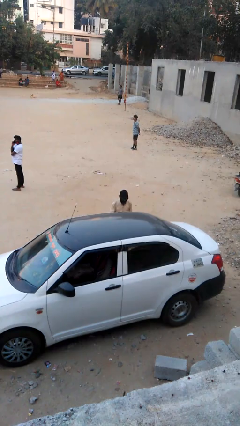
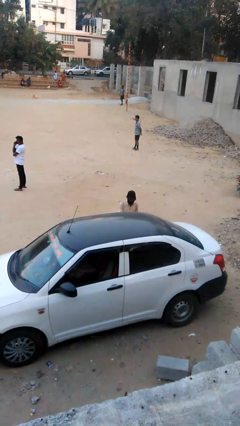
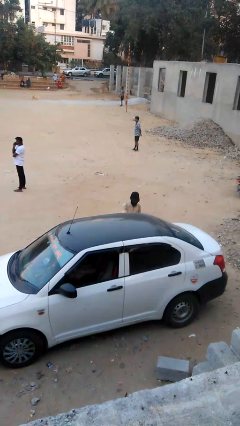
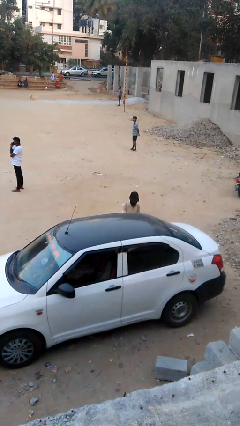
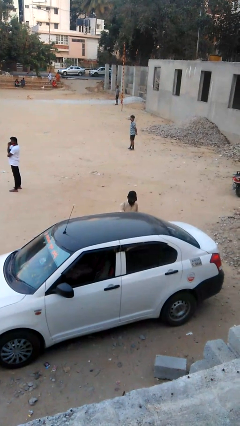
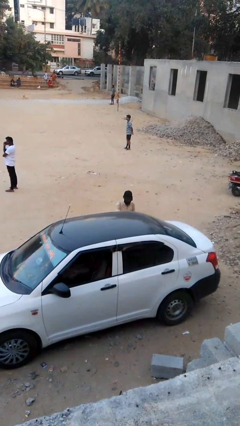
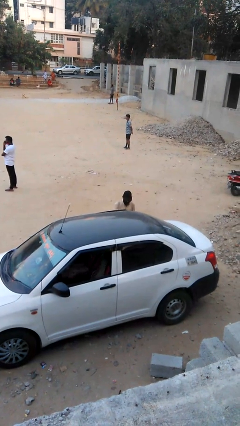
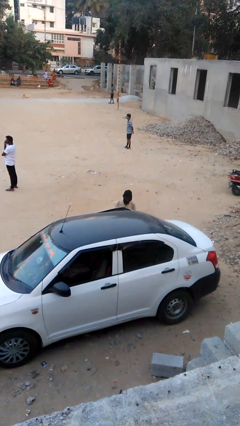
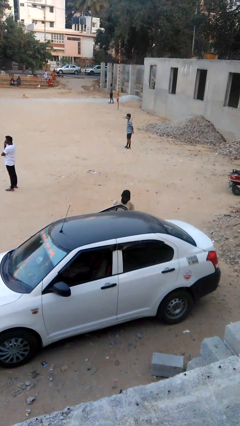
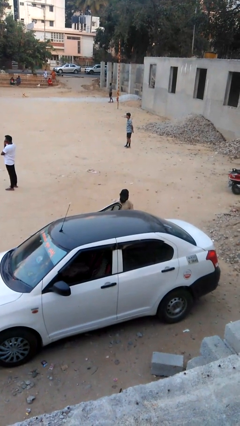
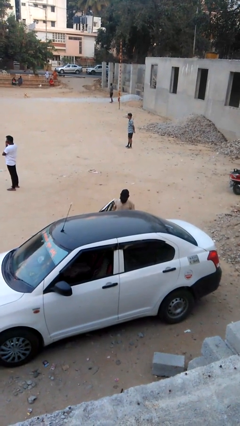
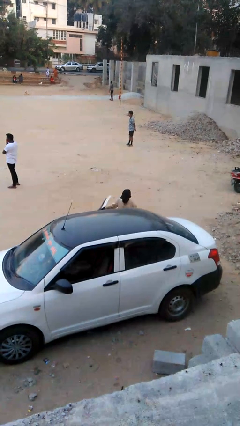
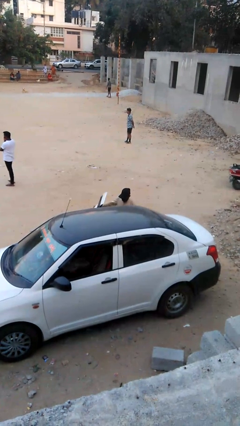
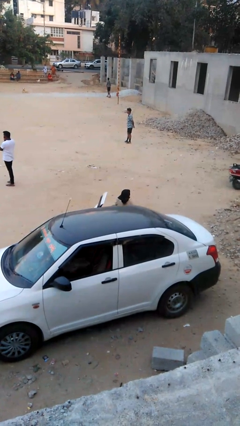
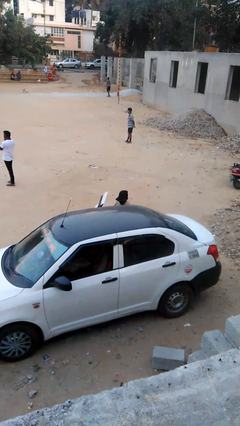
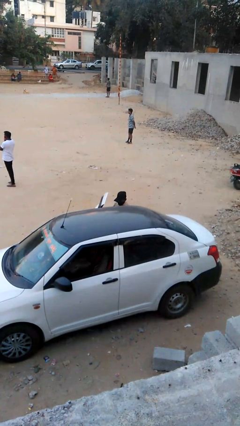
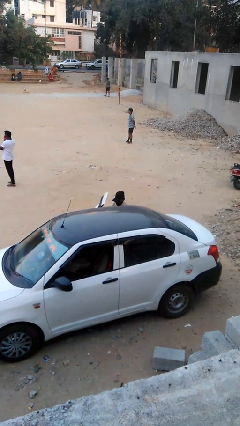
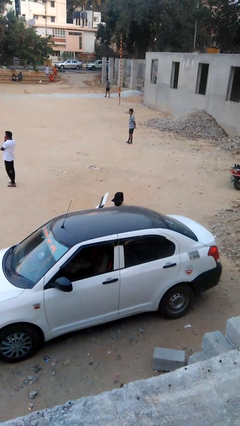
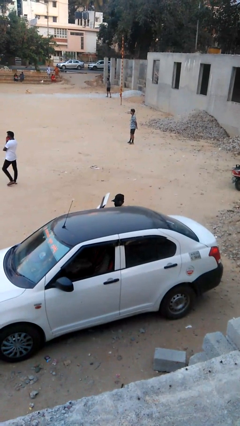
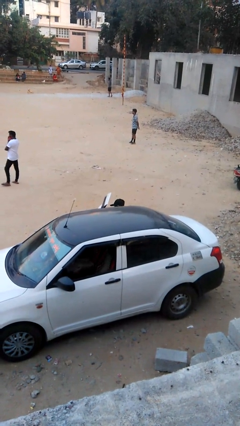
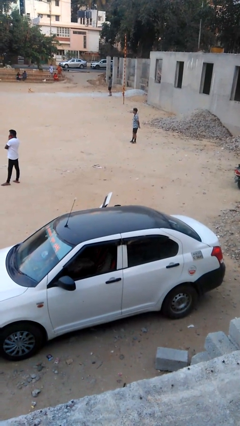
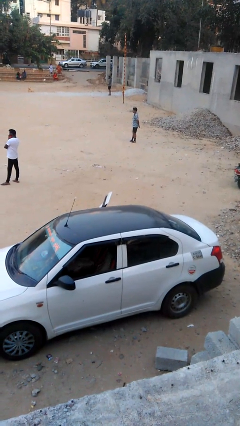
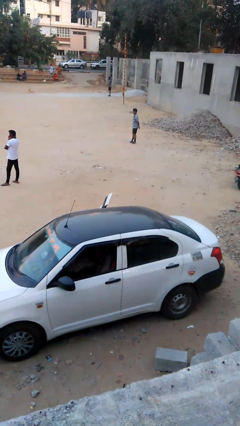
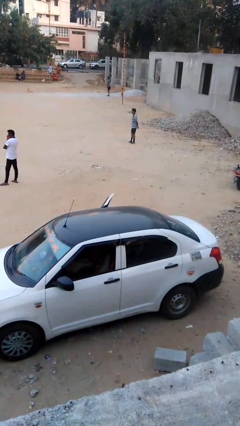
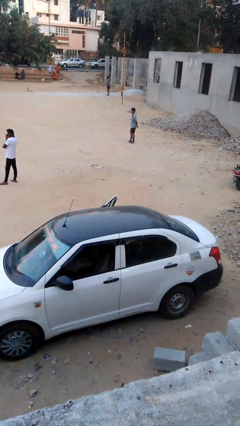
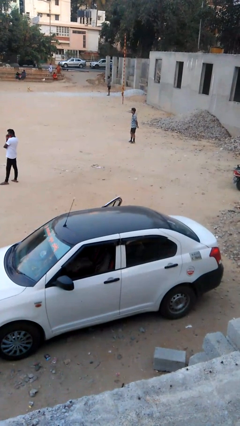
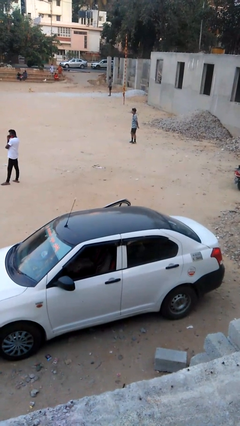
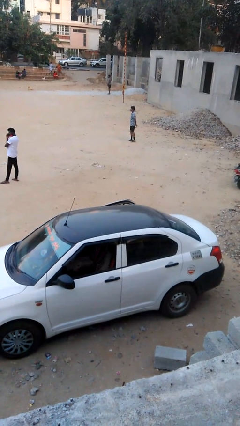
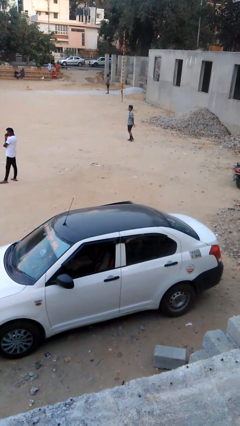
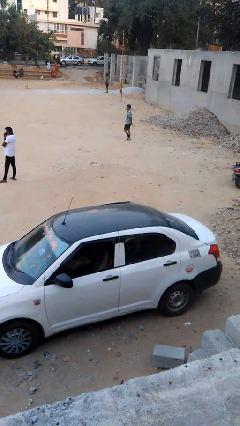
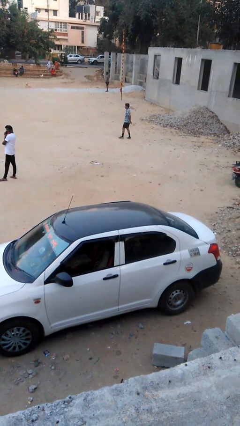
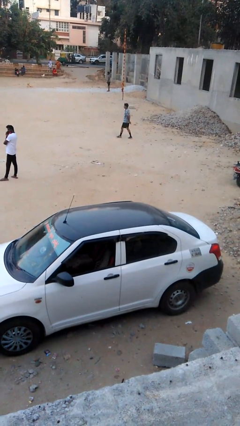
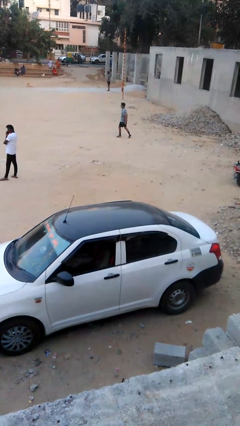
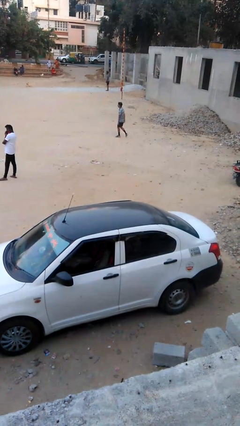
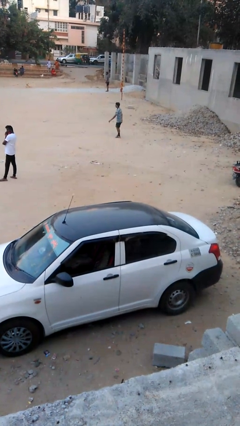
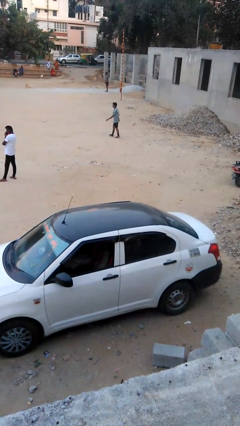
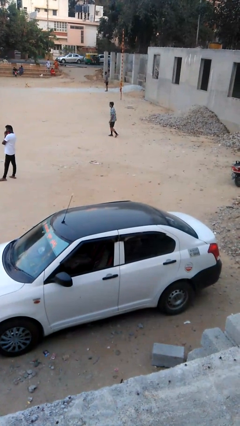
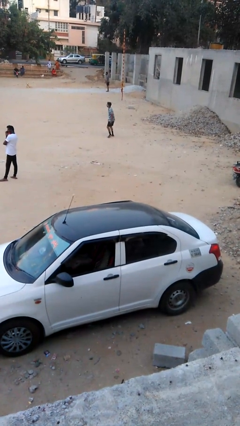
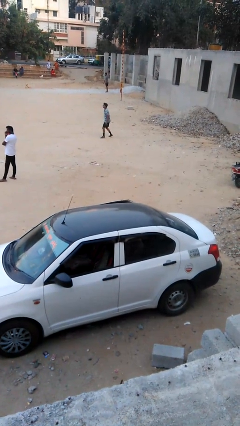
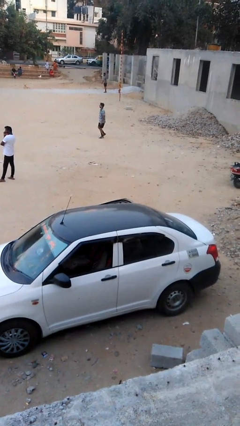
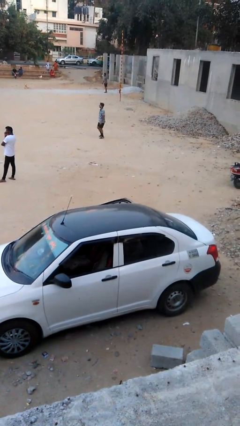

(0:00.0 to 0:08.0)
person enters car

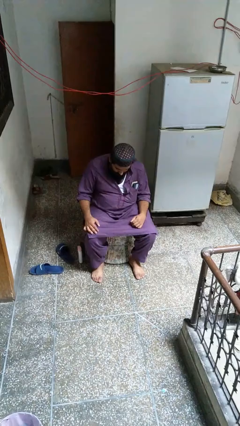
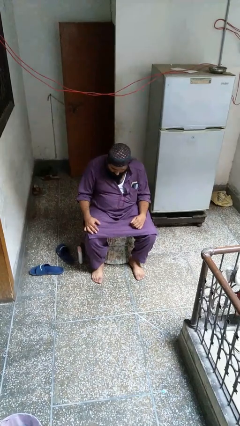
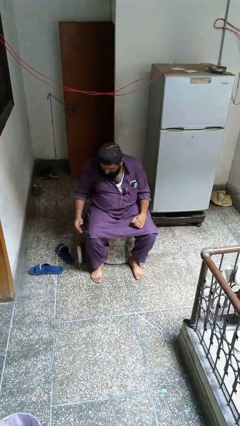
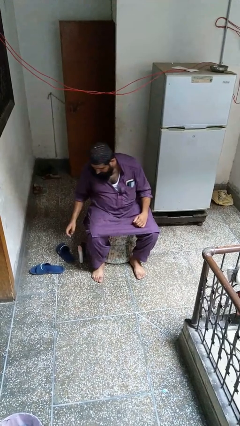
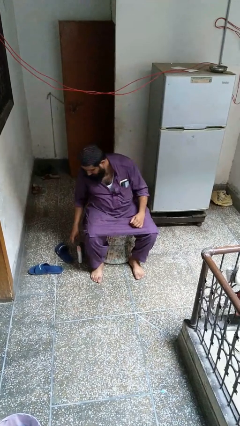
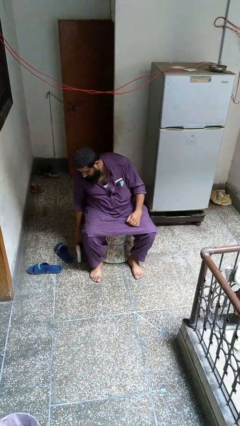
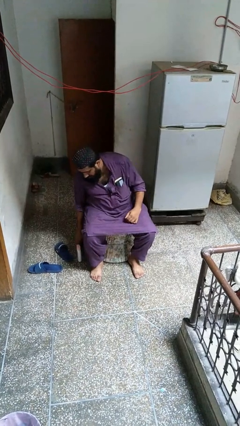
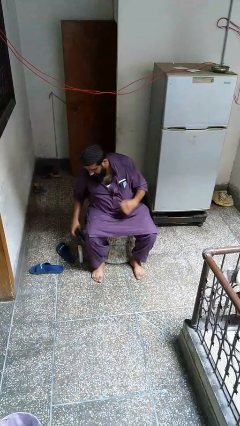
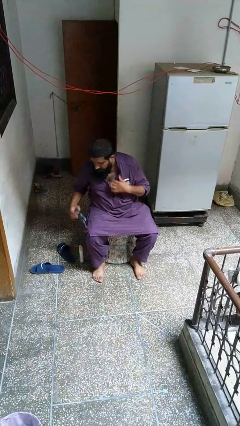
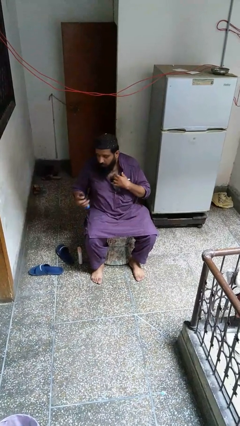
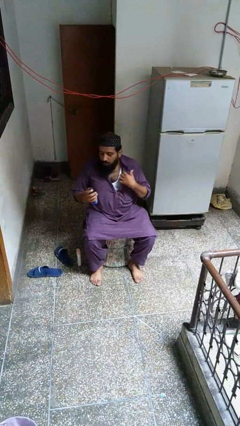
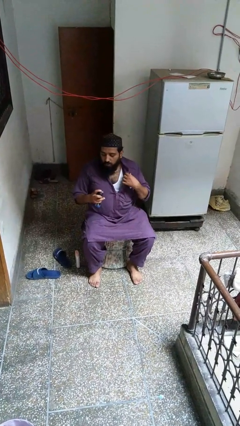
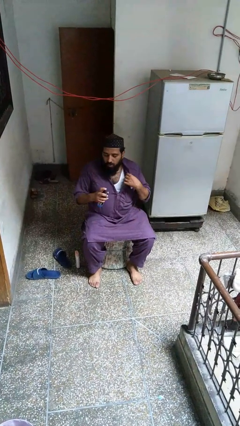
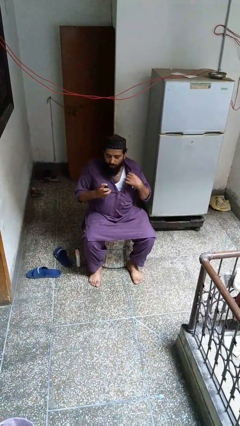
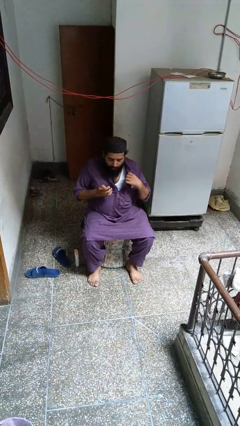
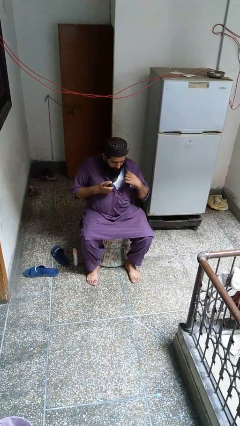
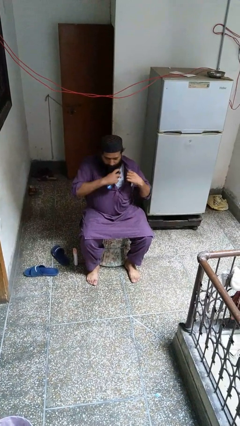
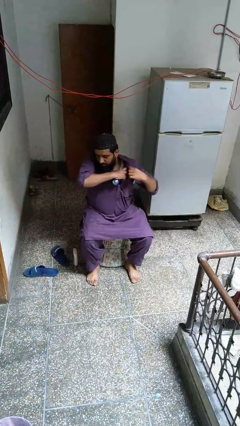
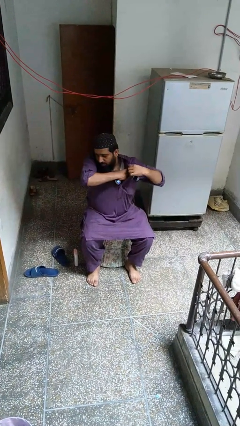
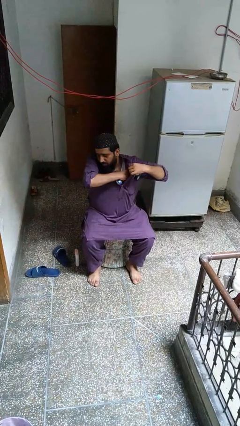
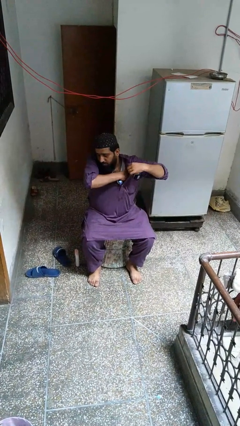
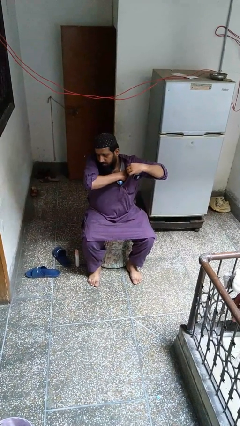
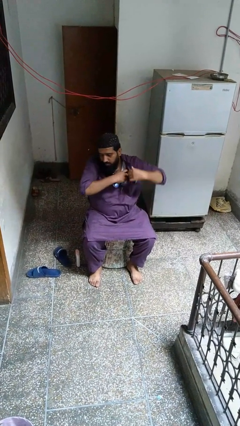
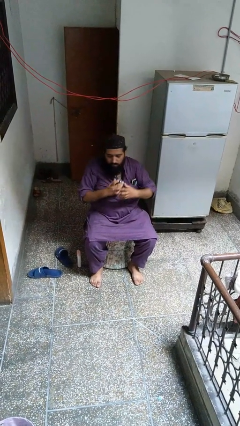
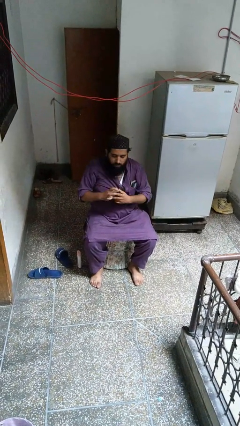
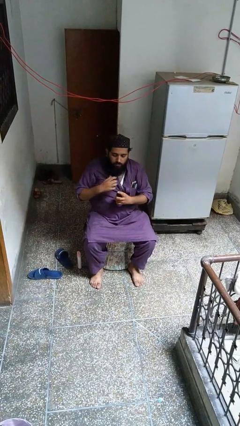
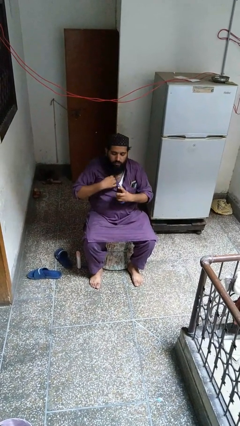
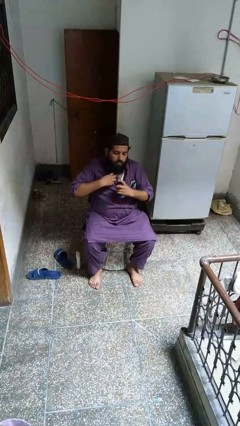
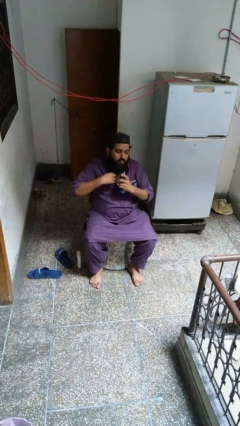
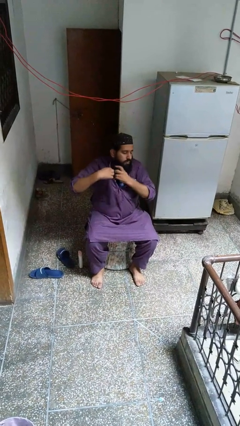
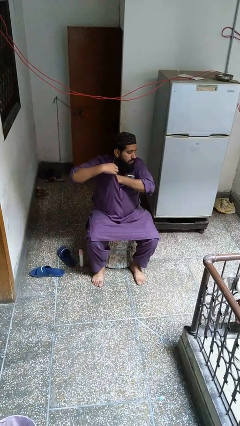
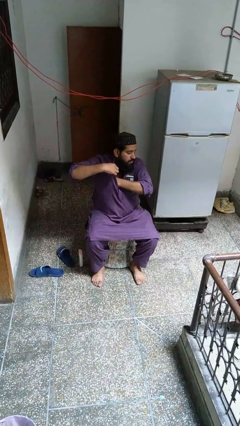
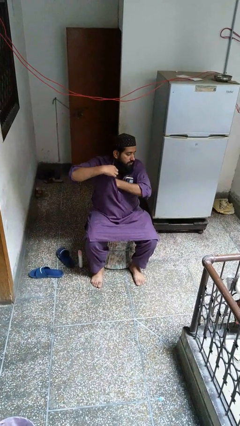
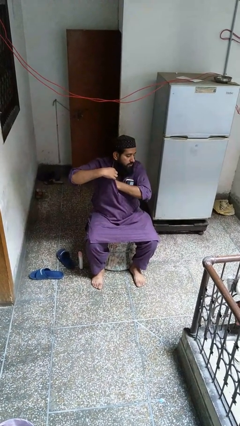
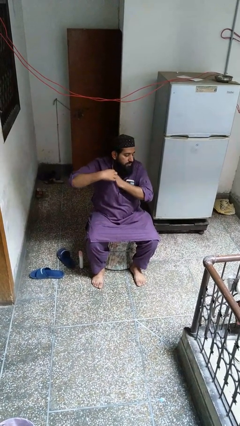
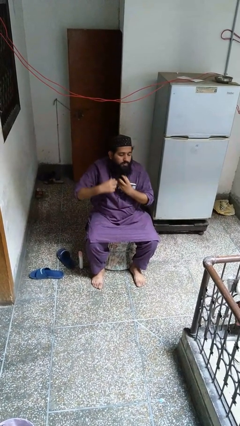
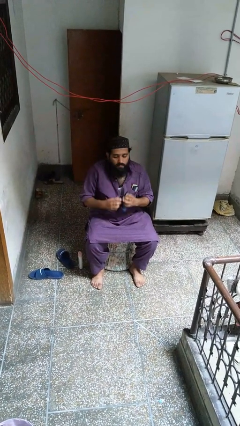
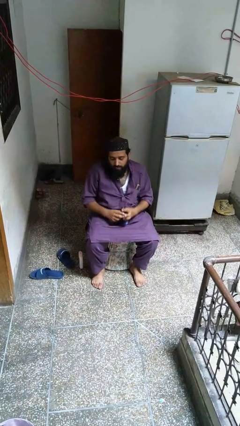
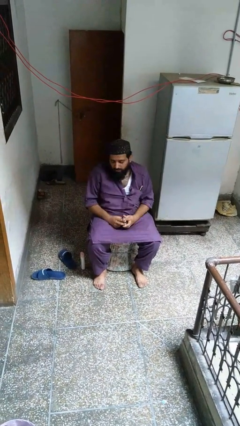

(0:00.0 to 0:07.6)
person applies deodorant

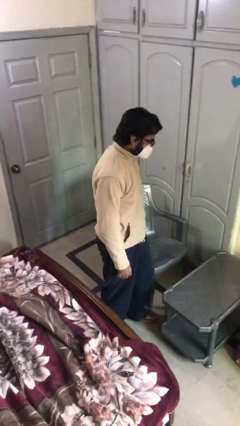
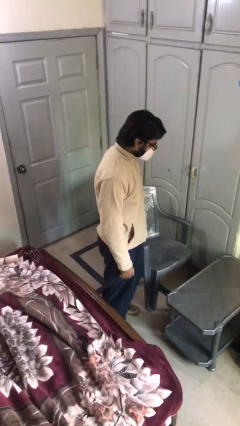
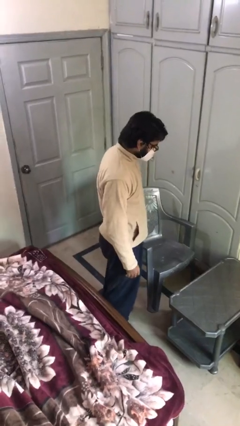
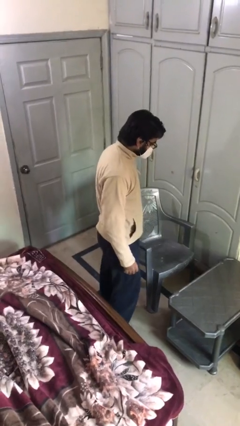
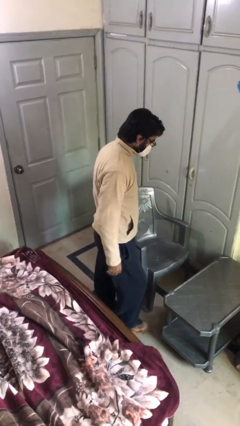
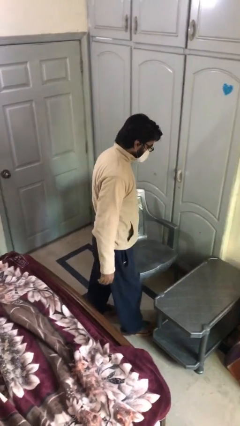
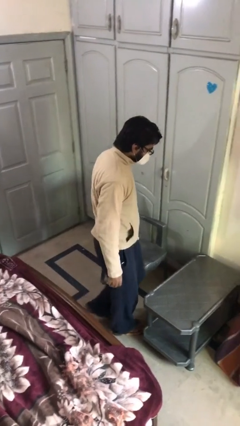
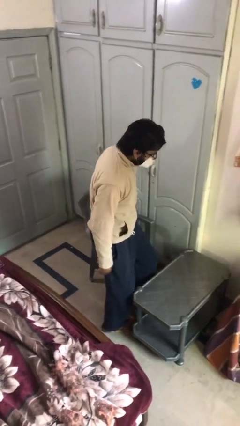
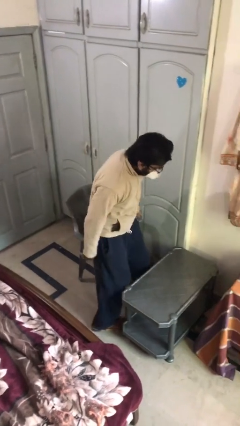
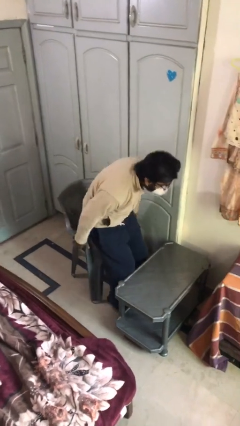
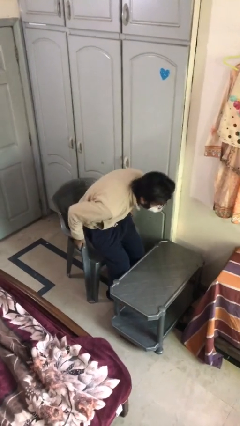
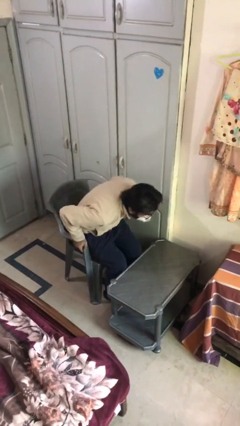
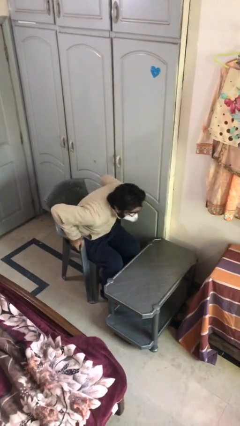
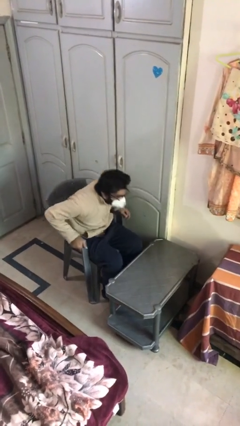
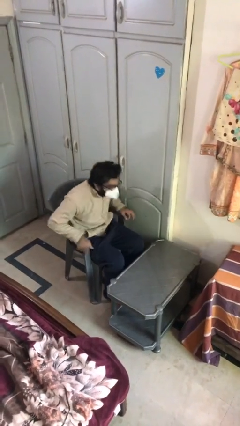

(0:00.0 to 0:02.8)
person sits down
